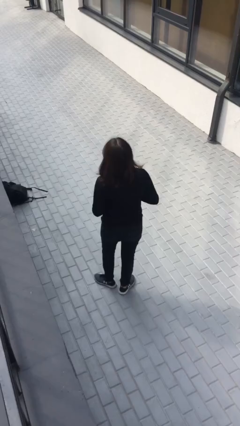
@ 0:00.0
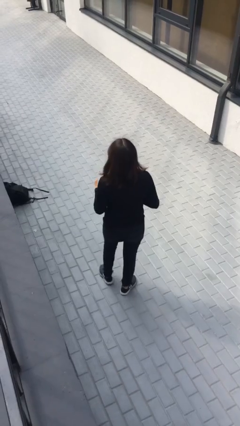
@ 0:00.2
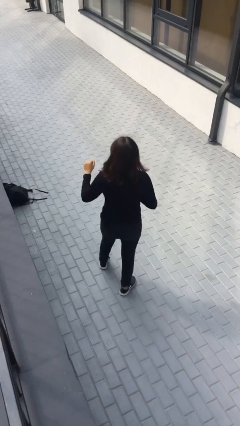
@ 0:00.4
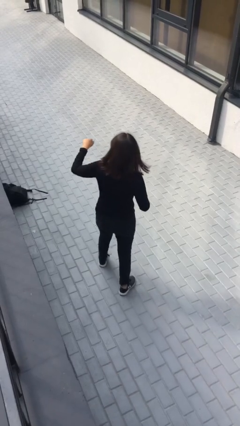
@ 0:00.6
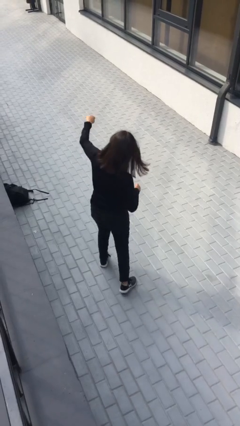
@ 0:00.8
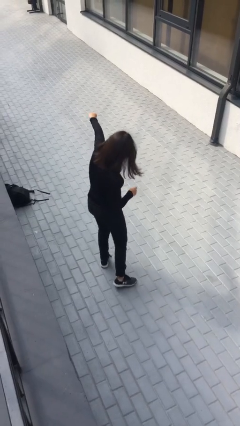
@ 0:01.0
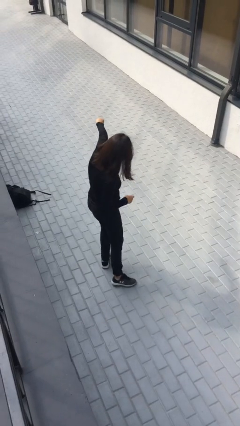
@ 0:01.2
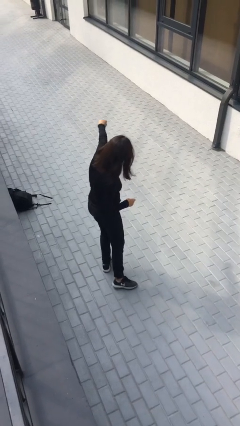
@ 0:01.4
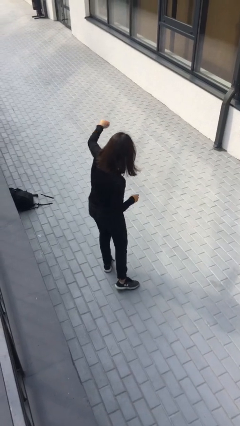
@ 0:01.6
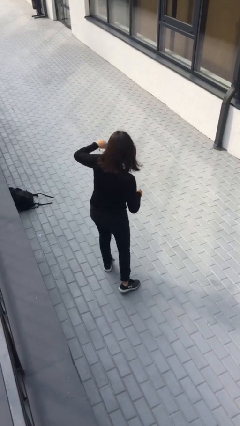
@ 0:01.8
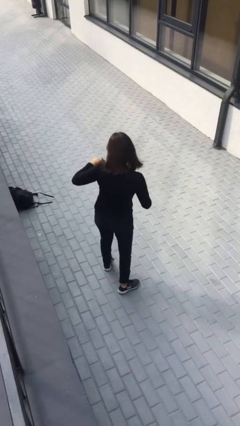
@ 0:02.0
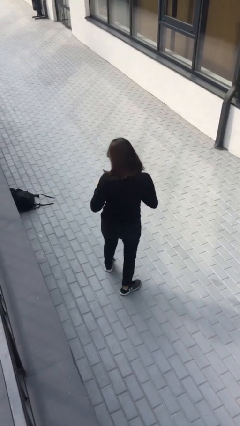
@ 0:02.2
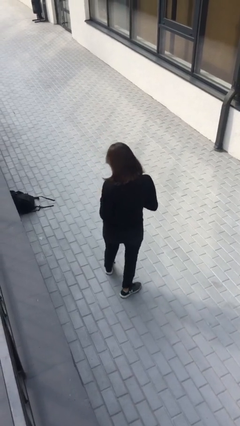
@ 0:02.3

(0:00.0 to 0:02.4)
person punches

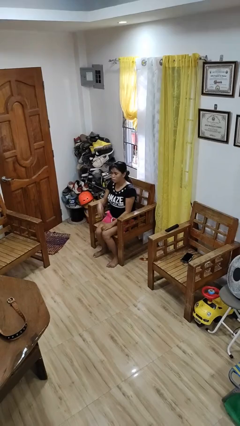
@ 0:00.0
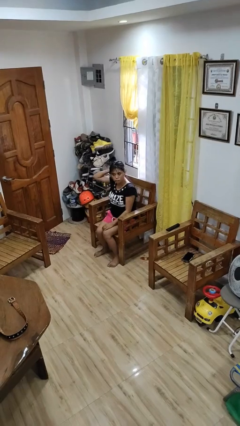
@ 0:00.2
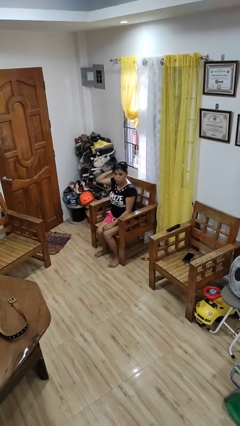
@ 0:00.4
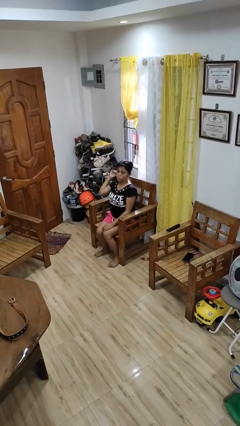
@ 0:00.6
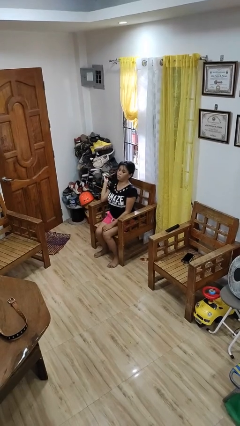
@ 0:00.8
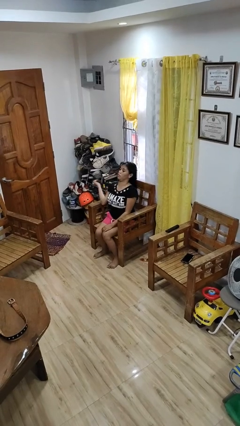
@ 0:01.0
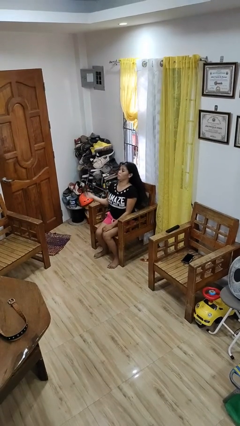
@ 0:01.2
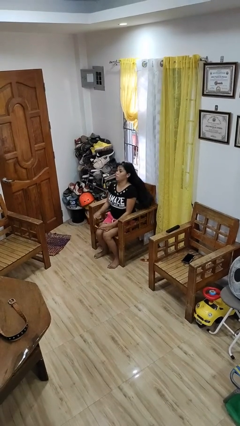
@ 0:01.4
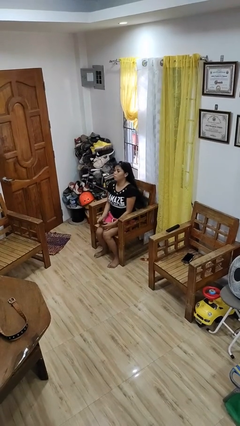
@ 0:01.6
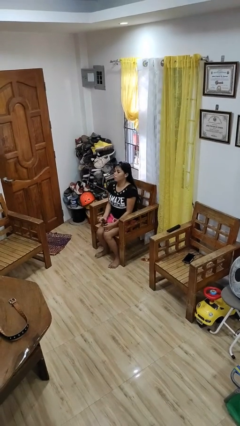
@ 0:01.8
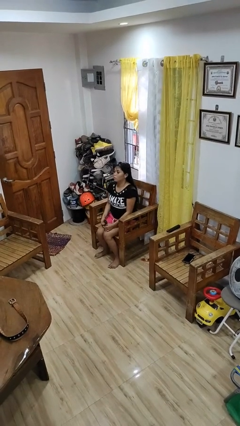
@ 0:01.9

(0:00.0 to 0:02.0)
person takes off hairtie

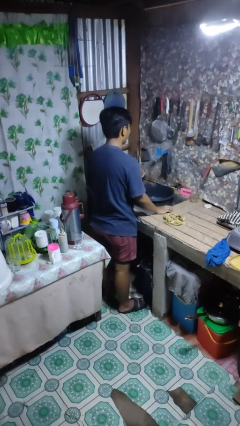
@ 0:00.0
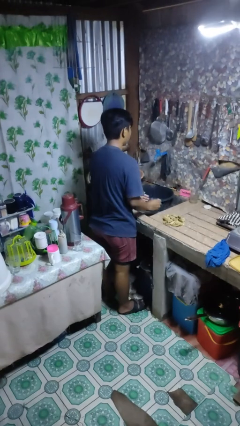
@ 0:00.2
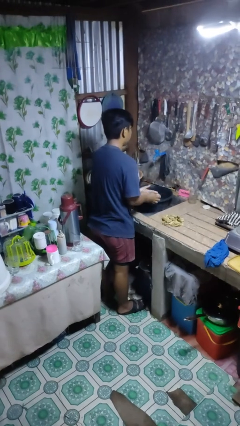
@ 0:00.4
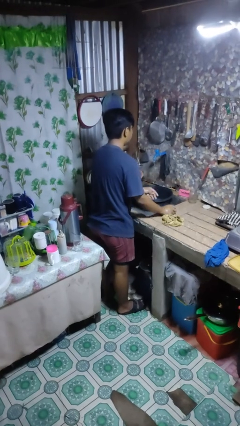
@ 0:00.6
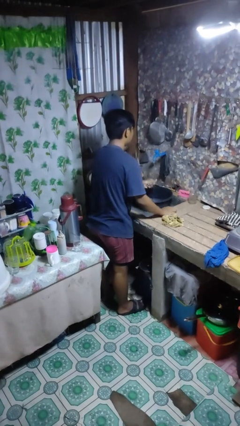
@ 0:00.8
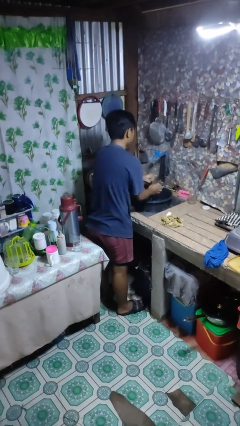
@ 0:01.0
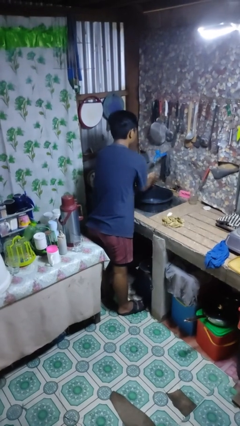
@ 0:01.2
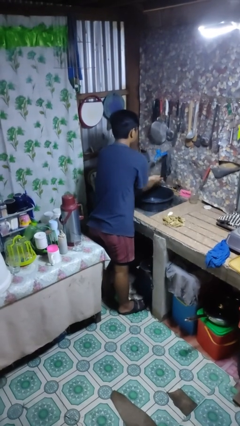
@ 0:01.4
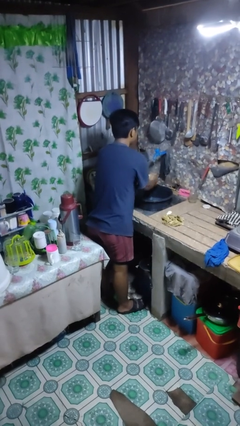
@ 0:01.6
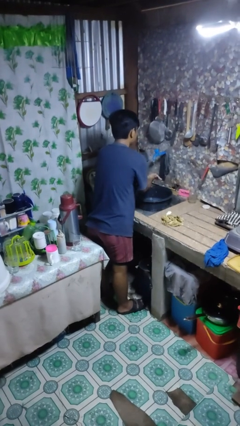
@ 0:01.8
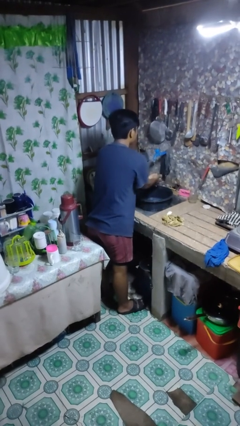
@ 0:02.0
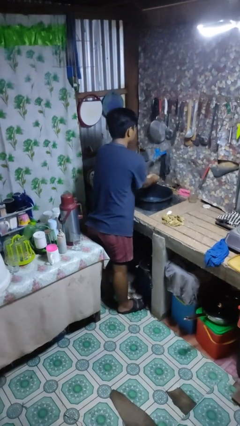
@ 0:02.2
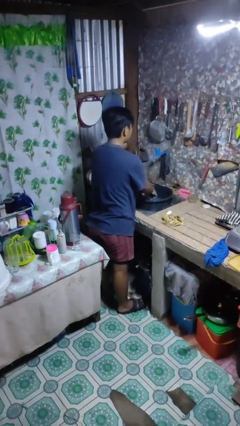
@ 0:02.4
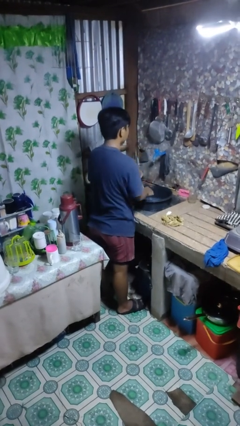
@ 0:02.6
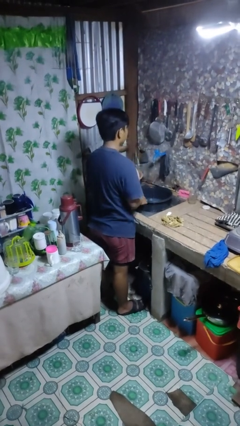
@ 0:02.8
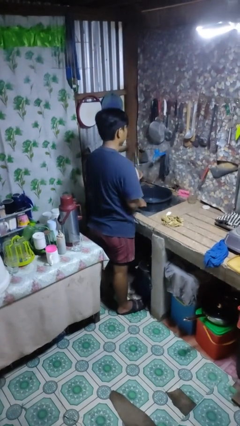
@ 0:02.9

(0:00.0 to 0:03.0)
person washes hands

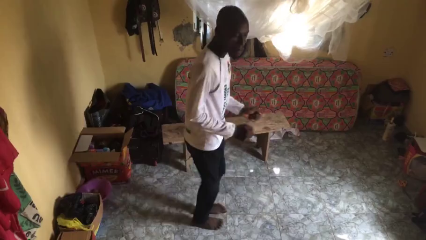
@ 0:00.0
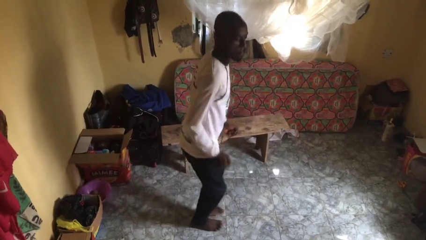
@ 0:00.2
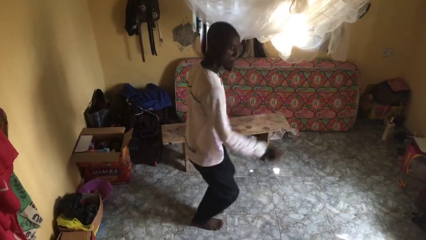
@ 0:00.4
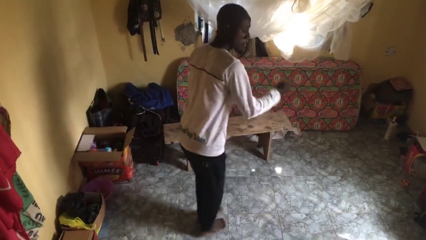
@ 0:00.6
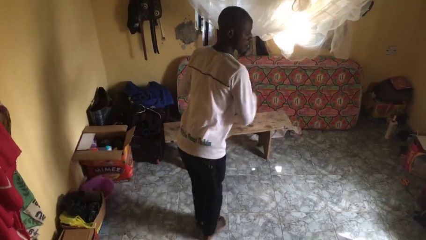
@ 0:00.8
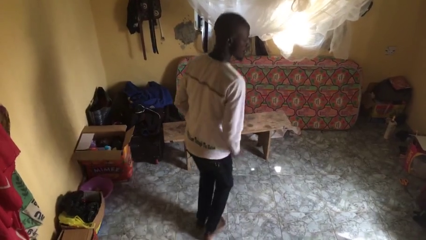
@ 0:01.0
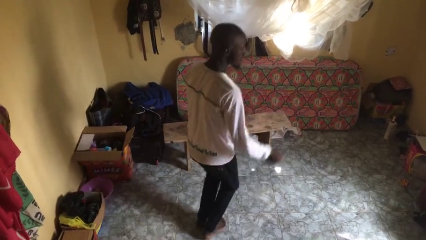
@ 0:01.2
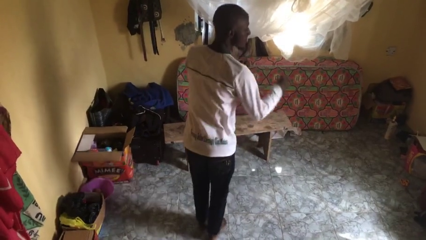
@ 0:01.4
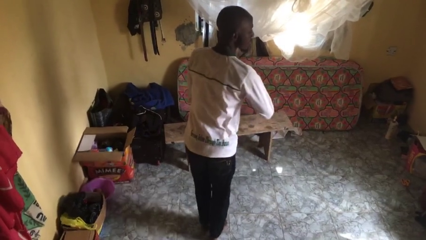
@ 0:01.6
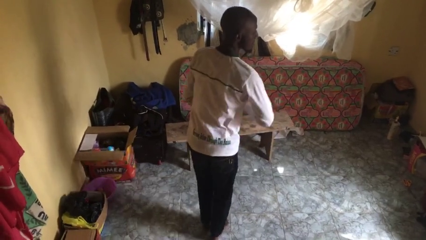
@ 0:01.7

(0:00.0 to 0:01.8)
person dances in place

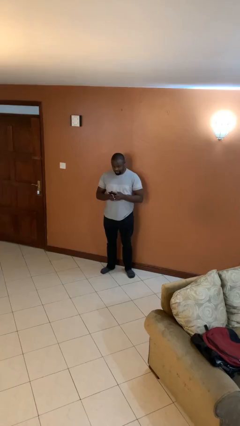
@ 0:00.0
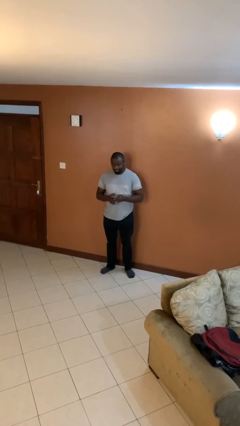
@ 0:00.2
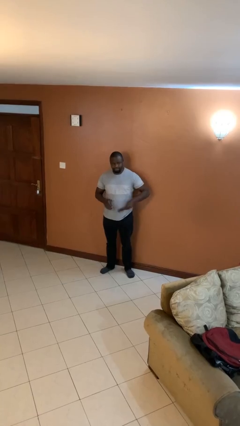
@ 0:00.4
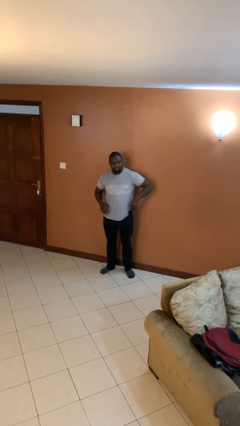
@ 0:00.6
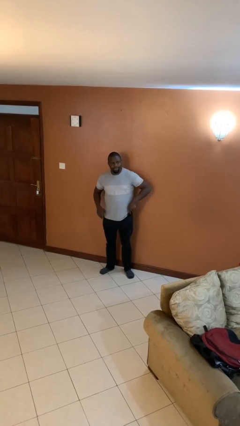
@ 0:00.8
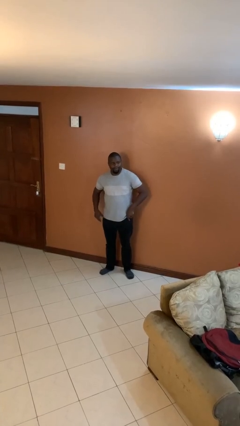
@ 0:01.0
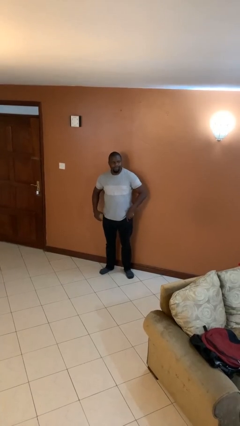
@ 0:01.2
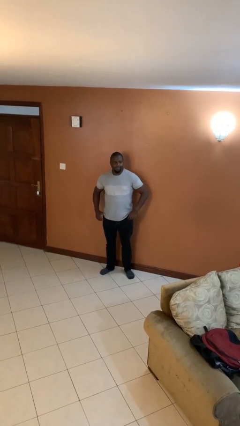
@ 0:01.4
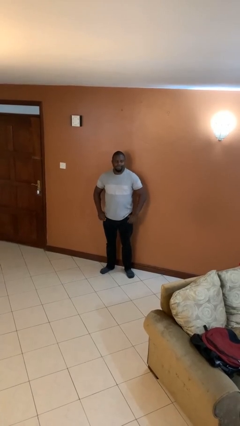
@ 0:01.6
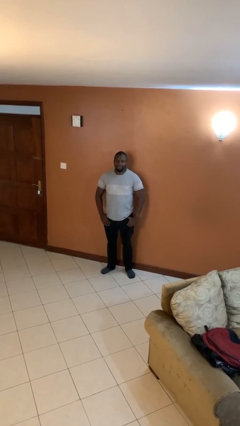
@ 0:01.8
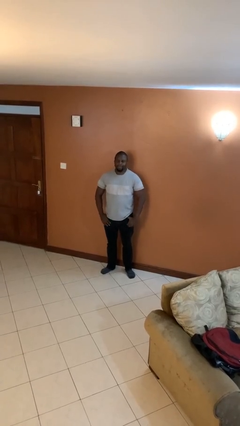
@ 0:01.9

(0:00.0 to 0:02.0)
person puts phone into pocket

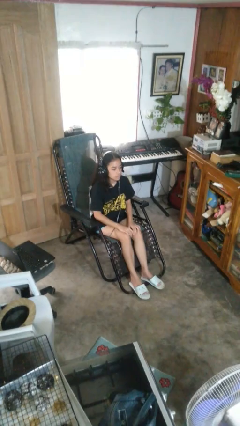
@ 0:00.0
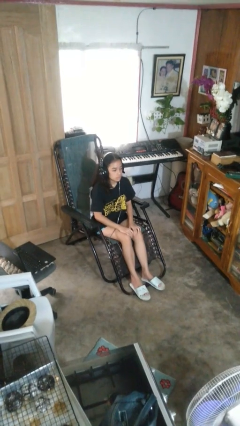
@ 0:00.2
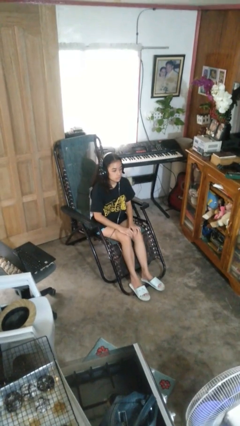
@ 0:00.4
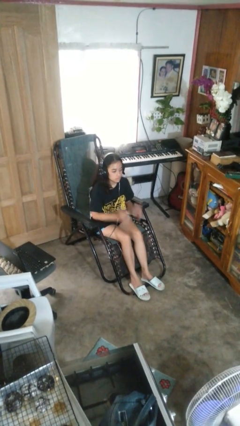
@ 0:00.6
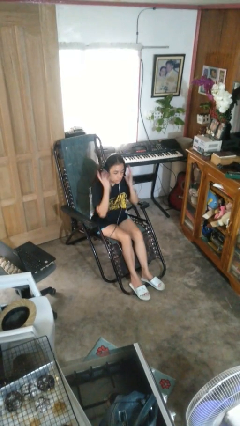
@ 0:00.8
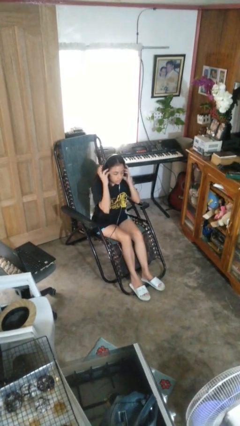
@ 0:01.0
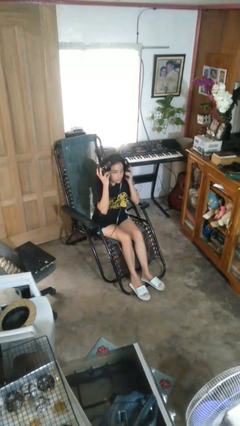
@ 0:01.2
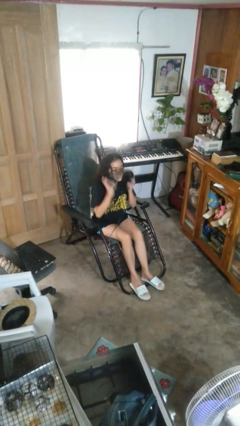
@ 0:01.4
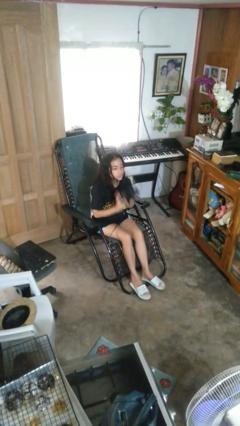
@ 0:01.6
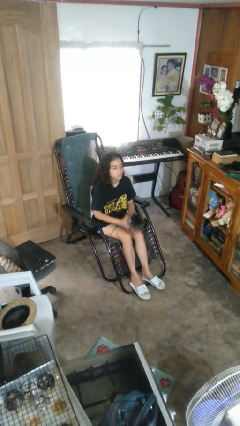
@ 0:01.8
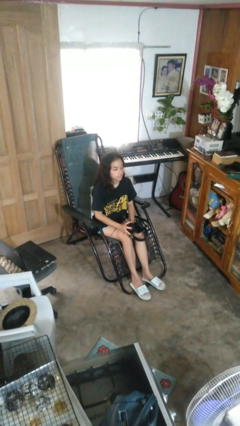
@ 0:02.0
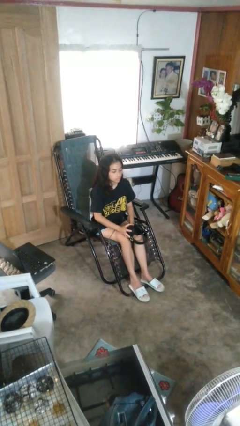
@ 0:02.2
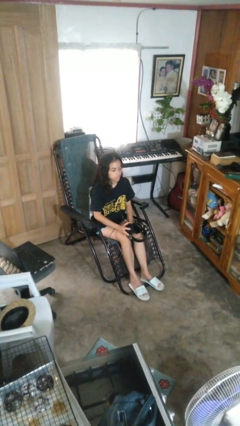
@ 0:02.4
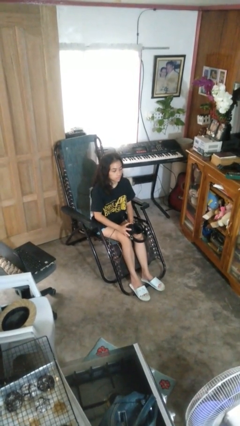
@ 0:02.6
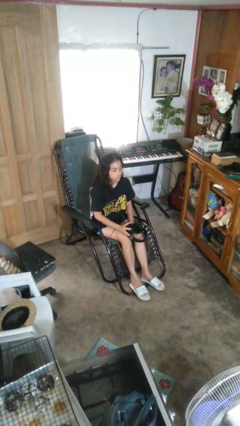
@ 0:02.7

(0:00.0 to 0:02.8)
person takes off headphones

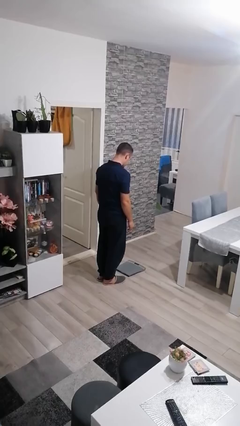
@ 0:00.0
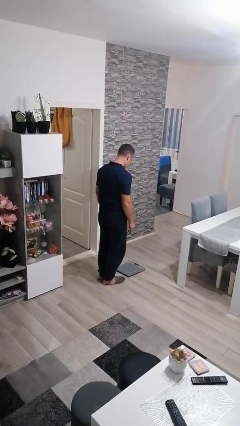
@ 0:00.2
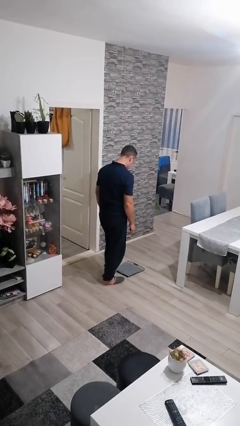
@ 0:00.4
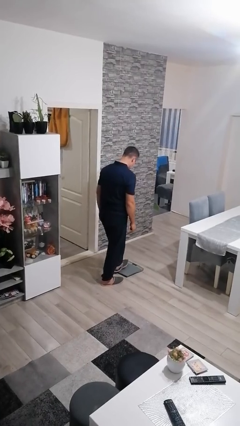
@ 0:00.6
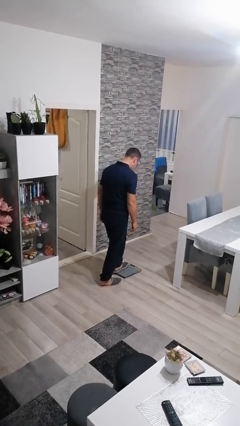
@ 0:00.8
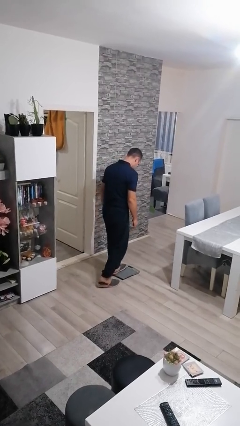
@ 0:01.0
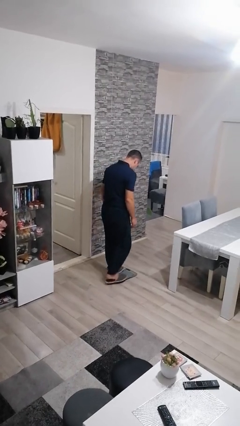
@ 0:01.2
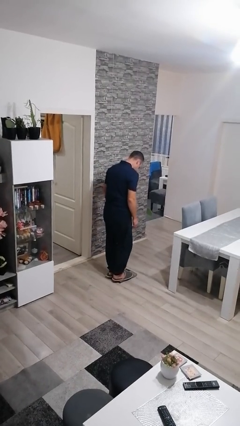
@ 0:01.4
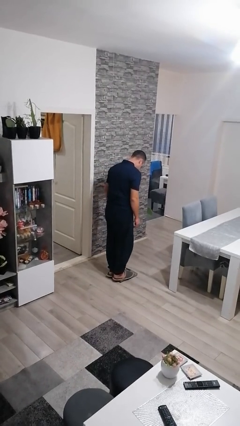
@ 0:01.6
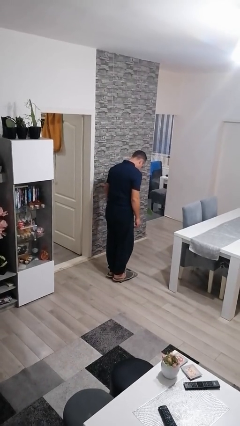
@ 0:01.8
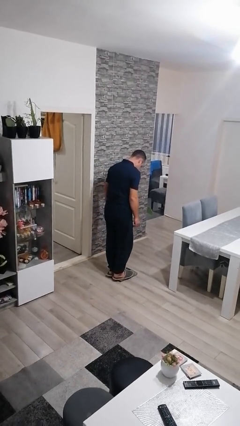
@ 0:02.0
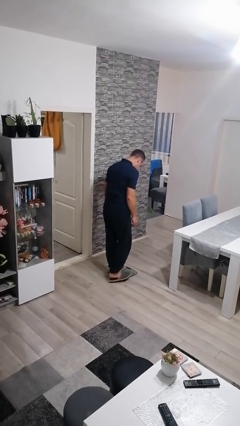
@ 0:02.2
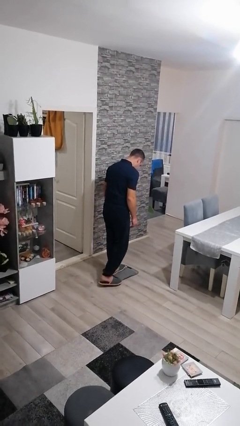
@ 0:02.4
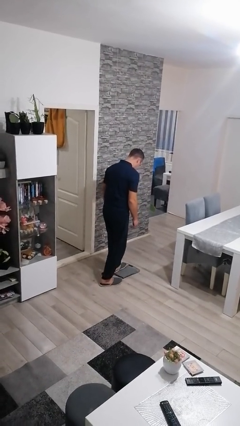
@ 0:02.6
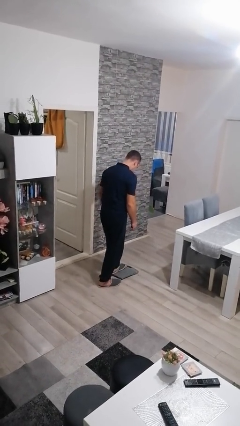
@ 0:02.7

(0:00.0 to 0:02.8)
person uses bodyweight scale
